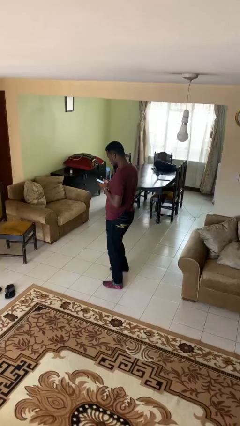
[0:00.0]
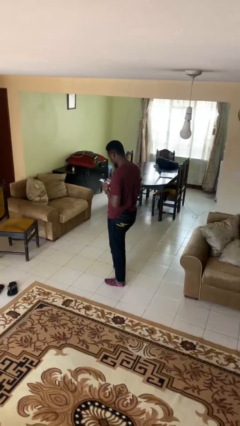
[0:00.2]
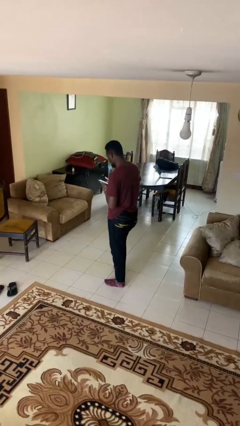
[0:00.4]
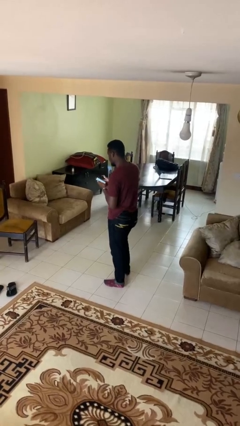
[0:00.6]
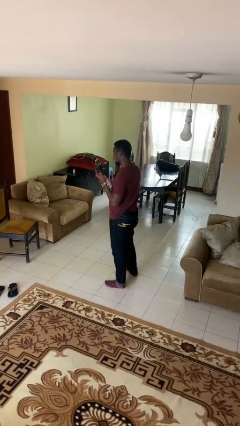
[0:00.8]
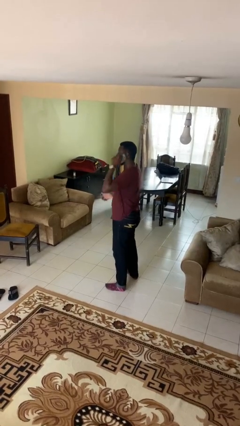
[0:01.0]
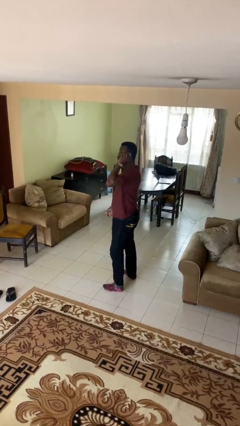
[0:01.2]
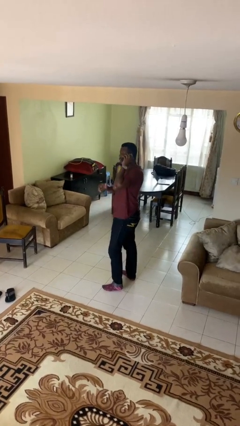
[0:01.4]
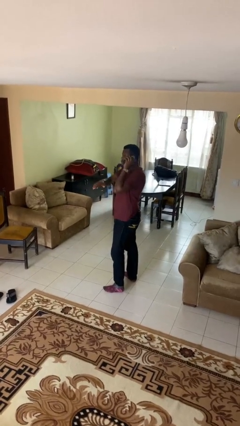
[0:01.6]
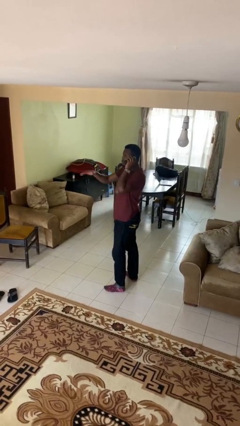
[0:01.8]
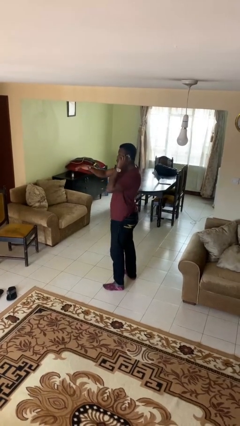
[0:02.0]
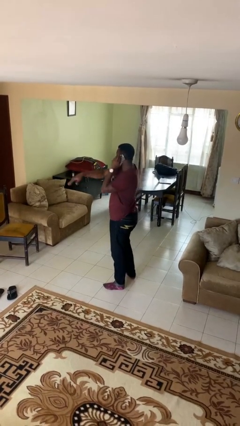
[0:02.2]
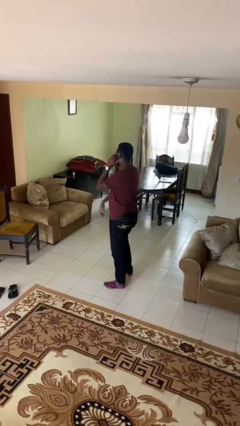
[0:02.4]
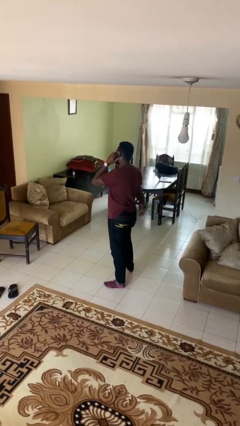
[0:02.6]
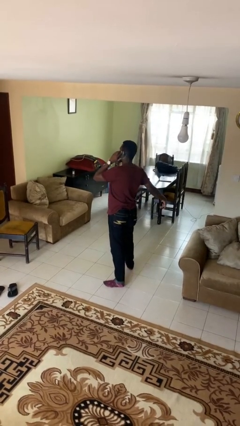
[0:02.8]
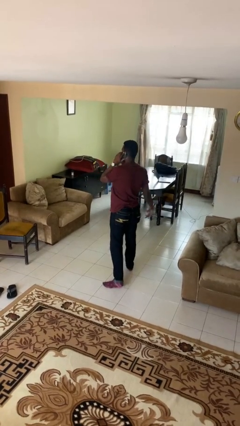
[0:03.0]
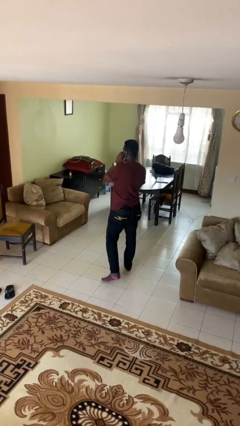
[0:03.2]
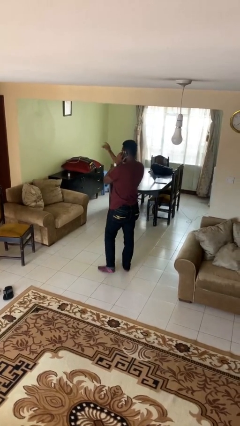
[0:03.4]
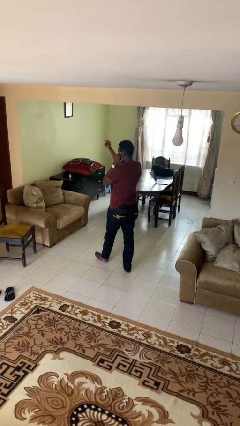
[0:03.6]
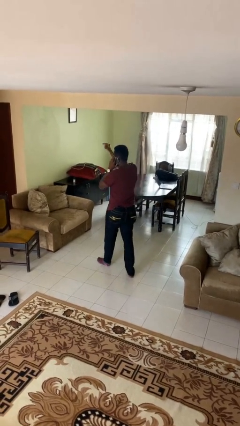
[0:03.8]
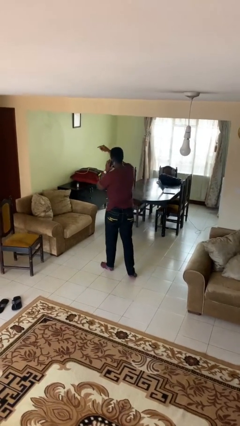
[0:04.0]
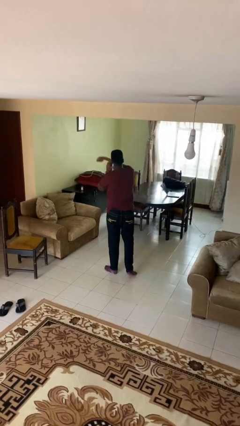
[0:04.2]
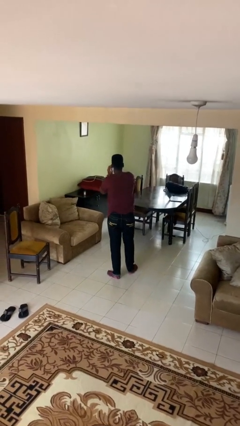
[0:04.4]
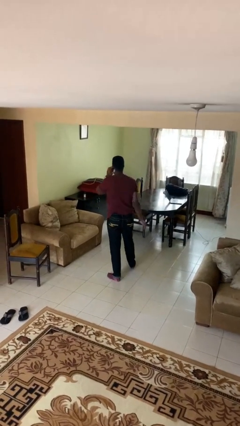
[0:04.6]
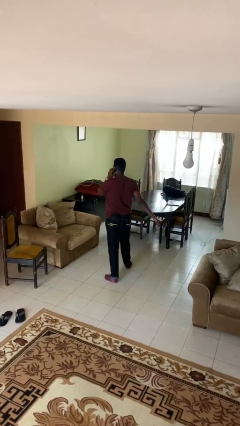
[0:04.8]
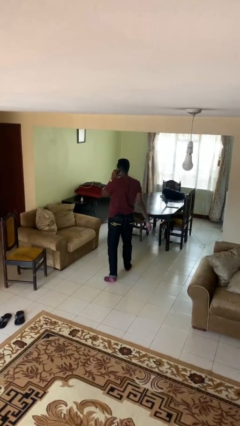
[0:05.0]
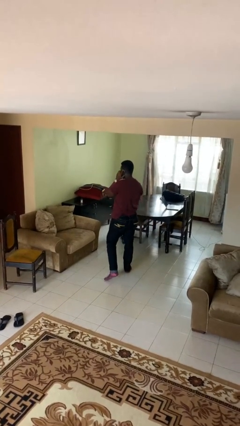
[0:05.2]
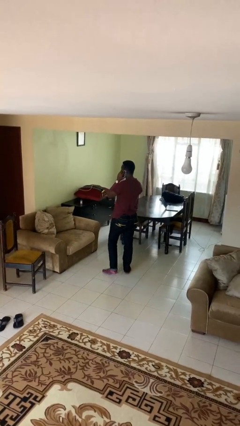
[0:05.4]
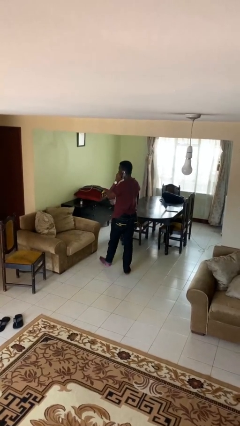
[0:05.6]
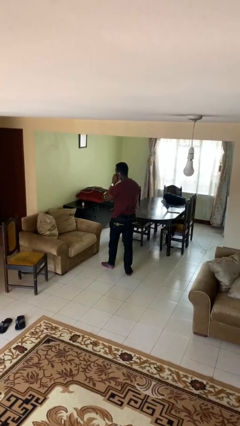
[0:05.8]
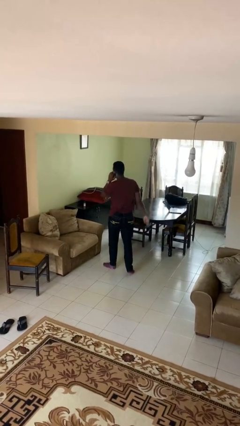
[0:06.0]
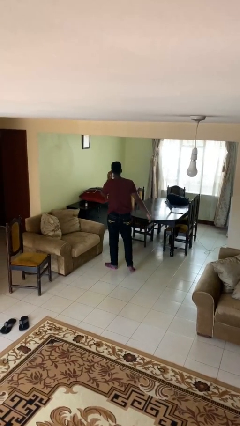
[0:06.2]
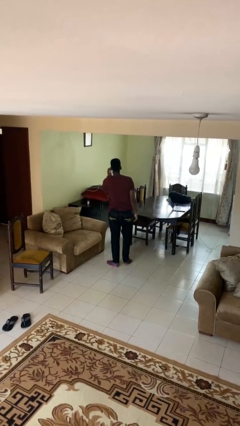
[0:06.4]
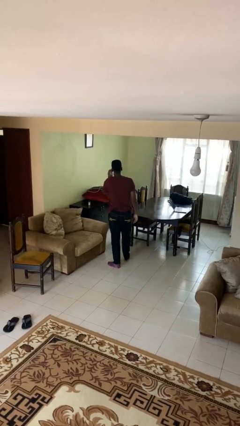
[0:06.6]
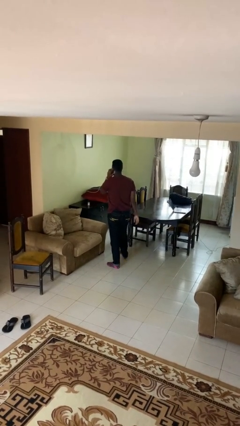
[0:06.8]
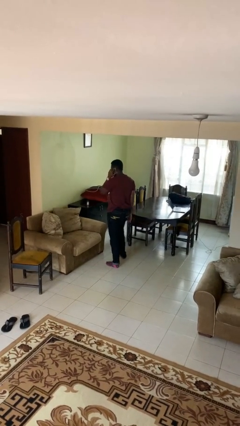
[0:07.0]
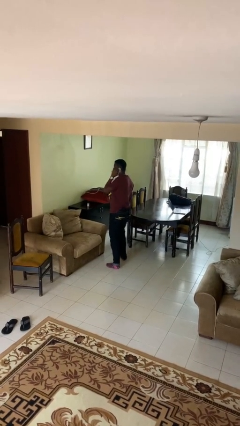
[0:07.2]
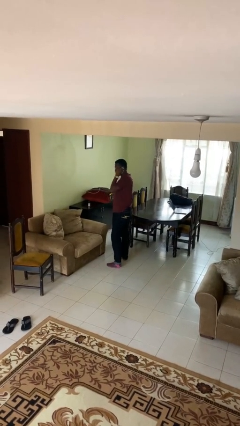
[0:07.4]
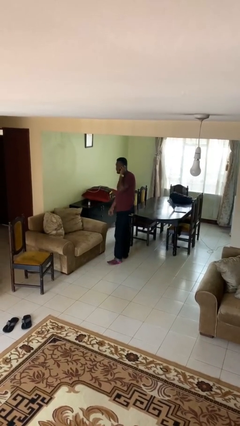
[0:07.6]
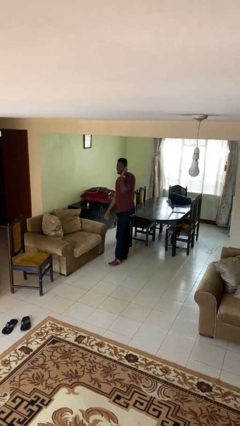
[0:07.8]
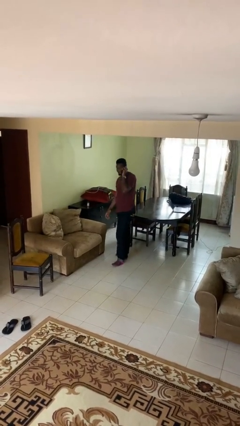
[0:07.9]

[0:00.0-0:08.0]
person talks on phone

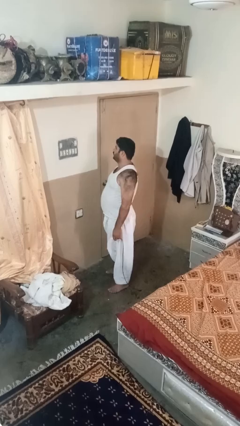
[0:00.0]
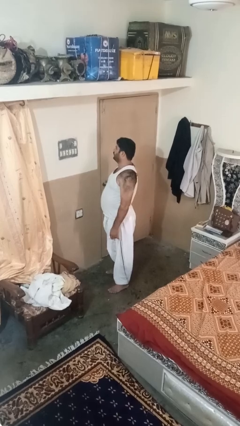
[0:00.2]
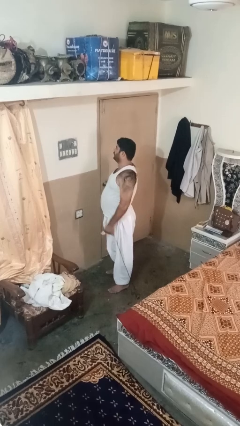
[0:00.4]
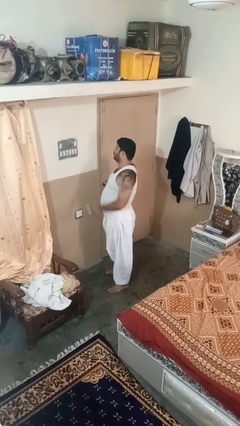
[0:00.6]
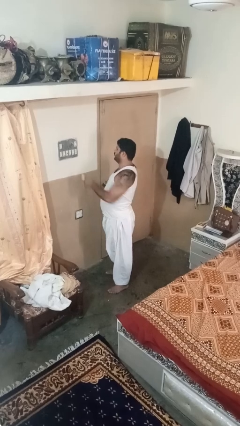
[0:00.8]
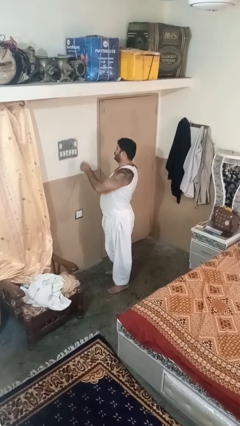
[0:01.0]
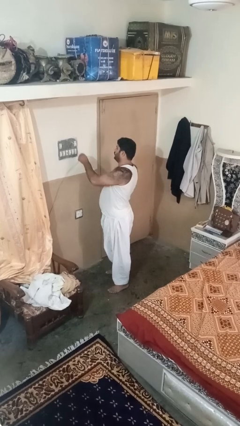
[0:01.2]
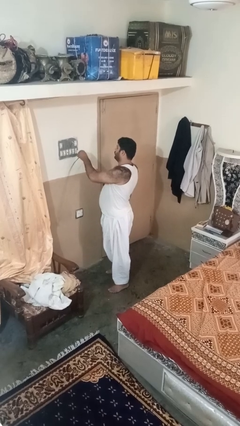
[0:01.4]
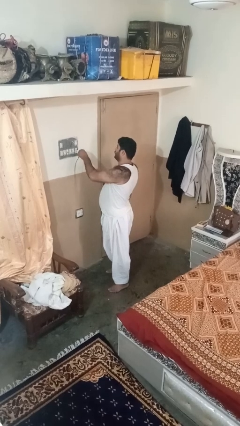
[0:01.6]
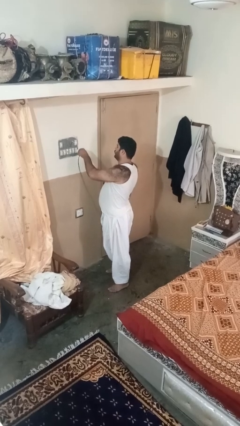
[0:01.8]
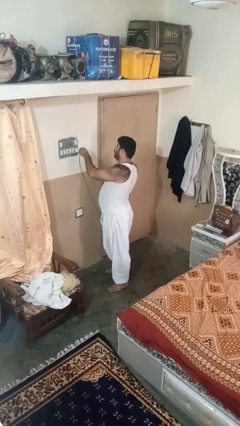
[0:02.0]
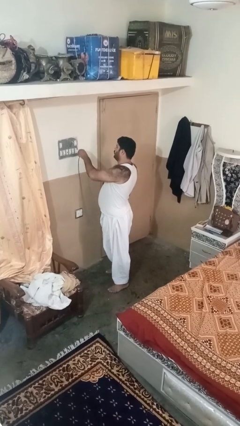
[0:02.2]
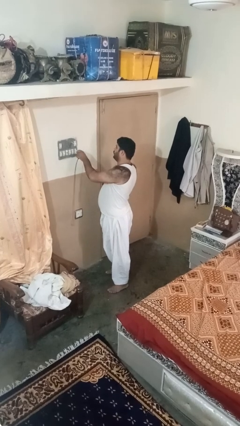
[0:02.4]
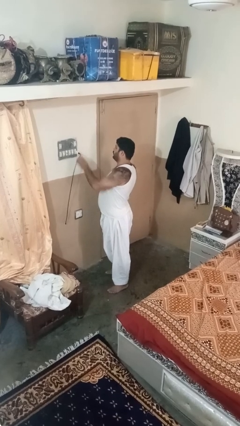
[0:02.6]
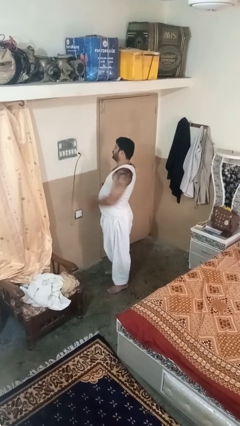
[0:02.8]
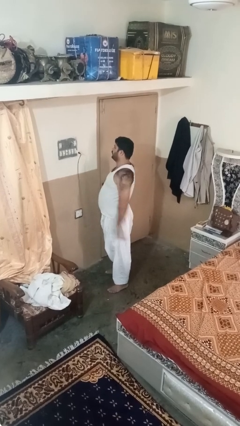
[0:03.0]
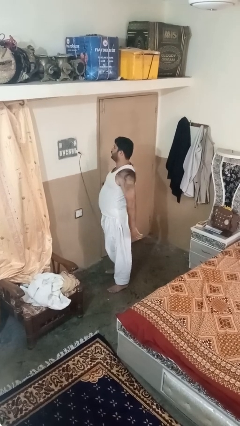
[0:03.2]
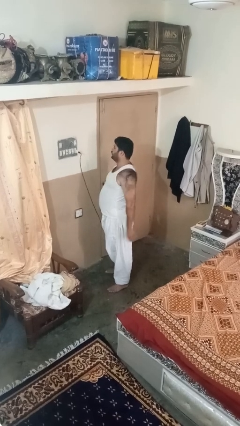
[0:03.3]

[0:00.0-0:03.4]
person plugs into electrical socket

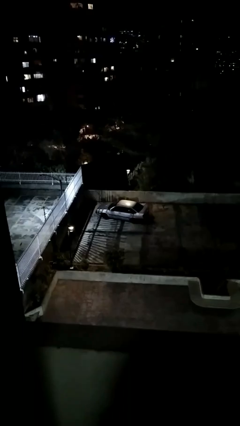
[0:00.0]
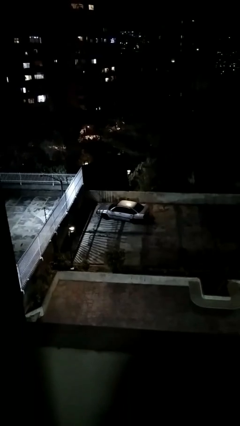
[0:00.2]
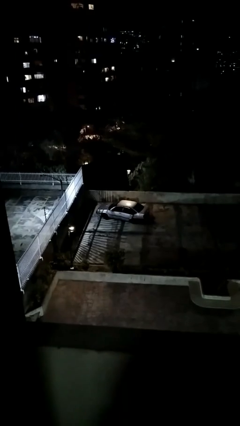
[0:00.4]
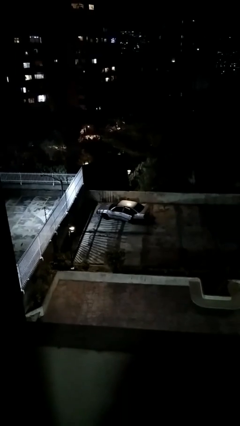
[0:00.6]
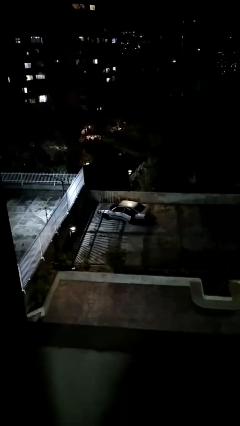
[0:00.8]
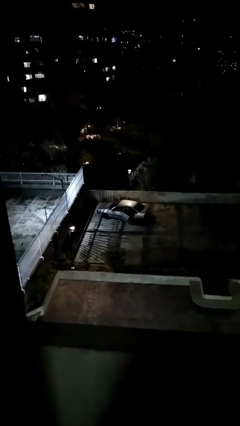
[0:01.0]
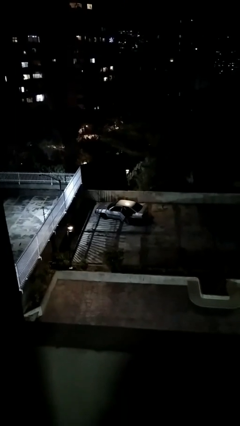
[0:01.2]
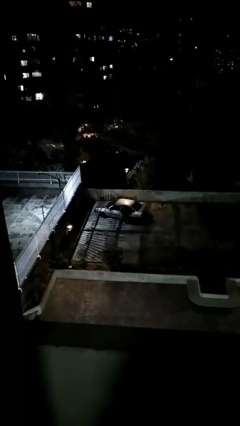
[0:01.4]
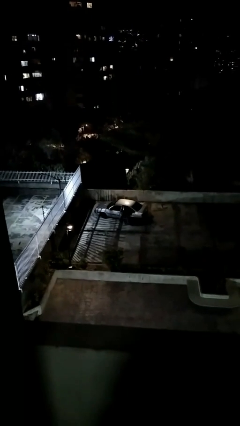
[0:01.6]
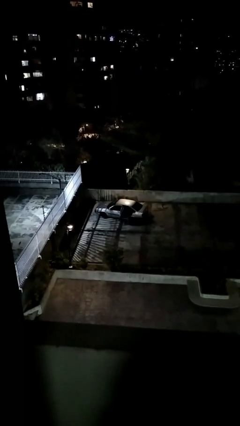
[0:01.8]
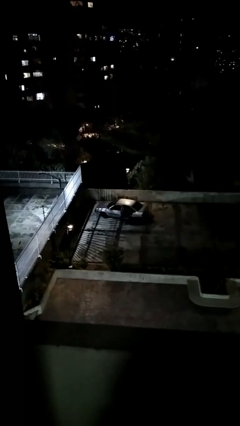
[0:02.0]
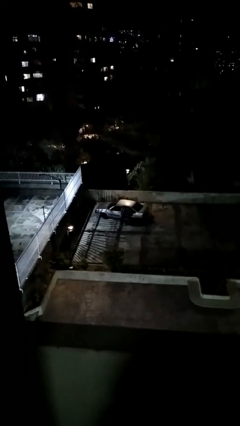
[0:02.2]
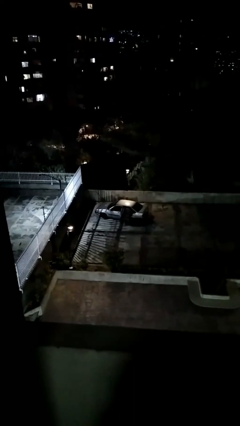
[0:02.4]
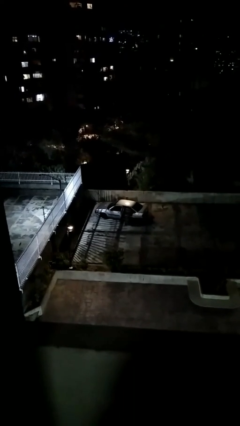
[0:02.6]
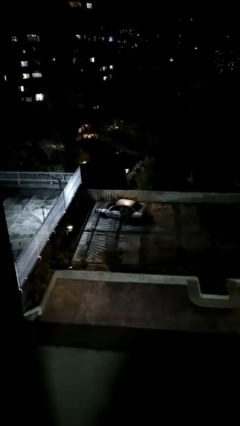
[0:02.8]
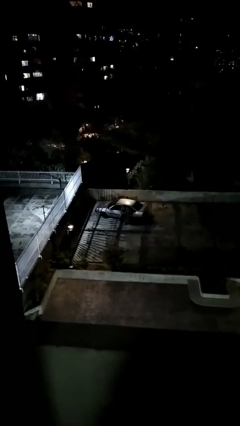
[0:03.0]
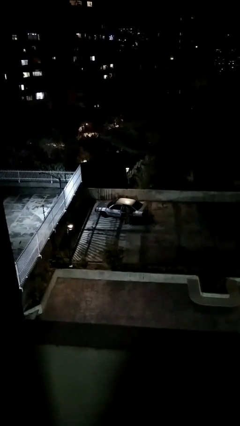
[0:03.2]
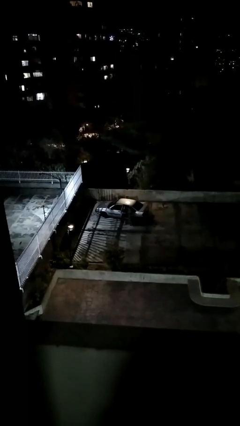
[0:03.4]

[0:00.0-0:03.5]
car drops off person

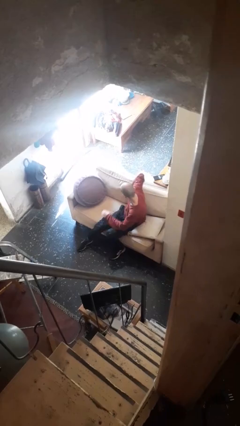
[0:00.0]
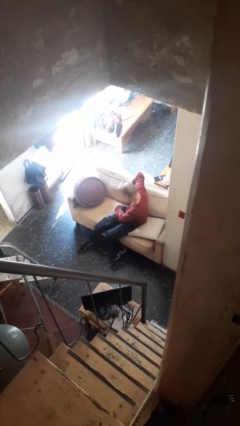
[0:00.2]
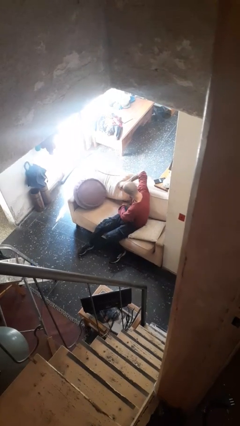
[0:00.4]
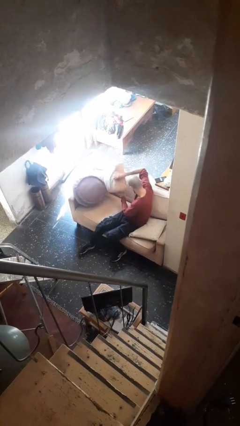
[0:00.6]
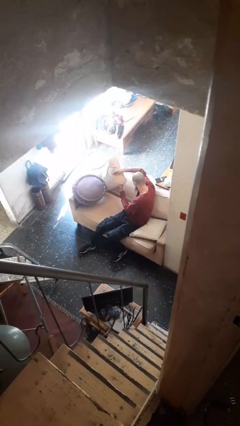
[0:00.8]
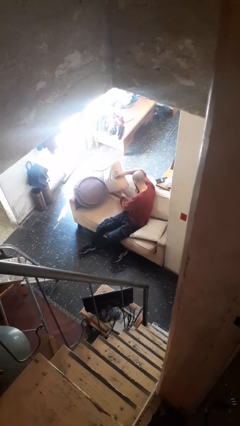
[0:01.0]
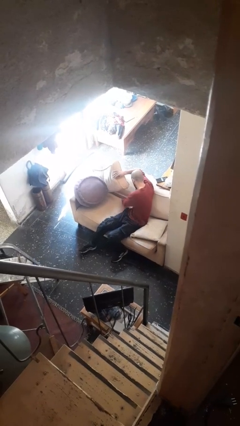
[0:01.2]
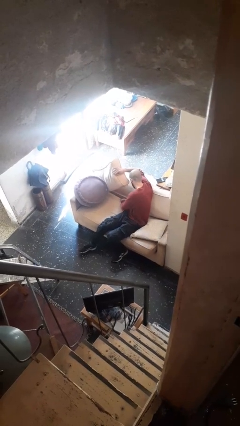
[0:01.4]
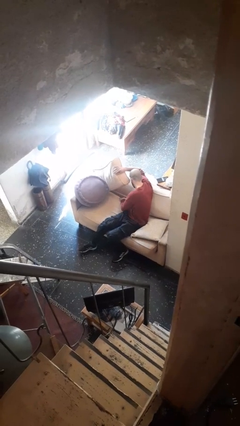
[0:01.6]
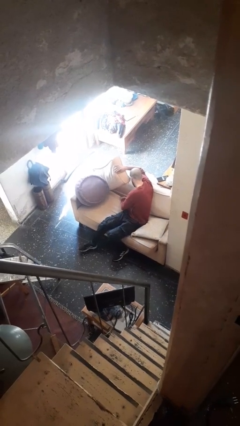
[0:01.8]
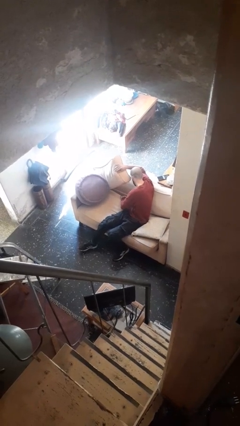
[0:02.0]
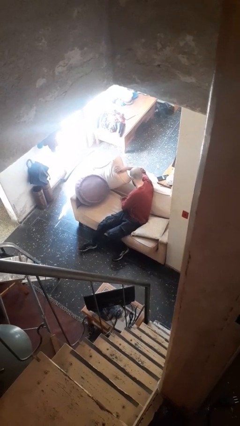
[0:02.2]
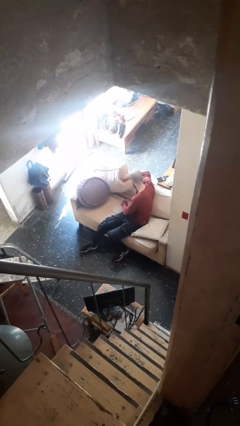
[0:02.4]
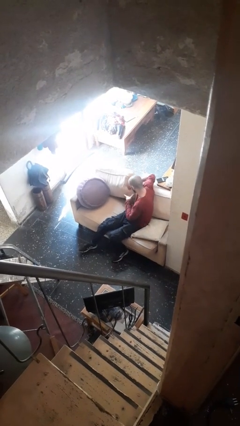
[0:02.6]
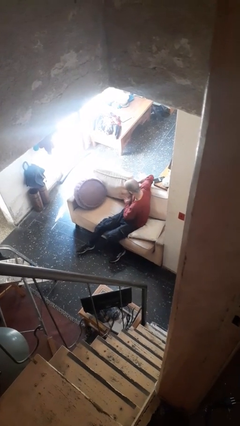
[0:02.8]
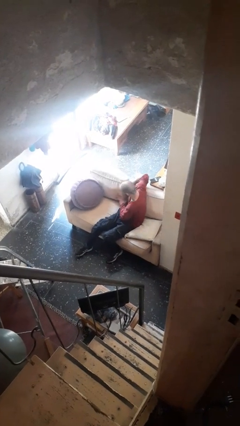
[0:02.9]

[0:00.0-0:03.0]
person searches in couch
